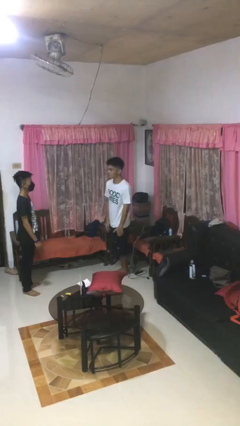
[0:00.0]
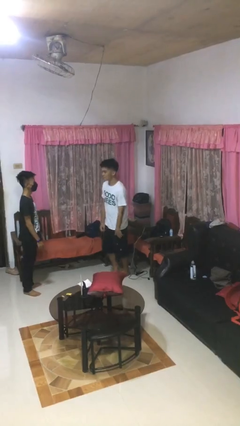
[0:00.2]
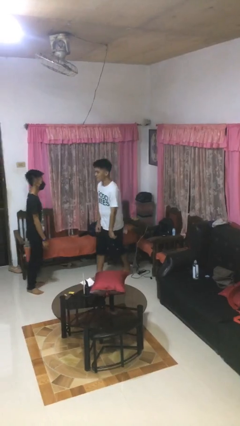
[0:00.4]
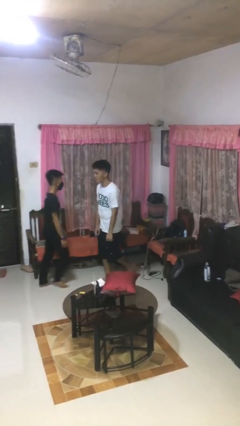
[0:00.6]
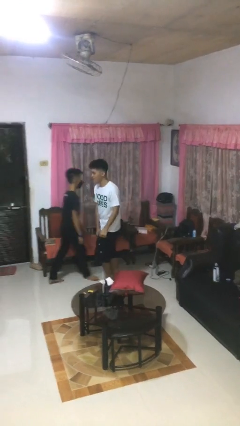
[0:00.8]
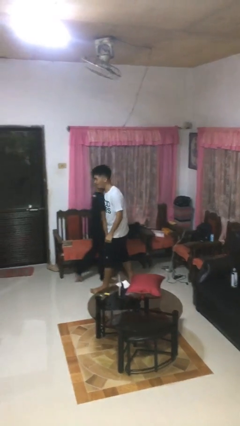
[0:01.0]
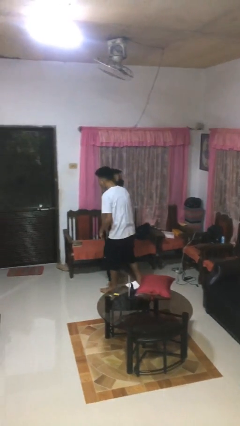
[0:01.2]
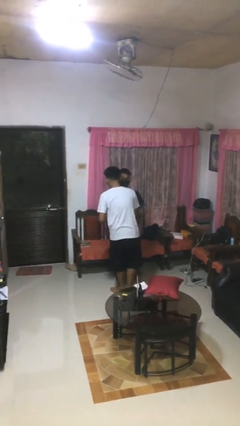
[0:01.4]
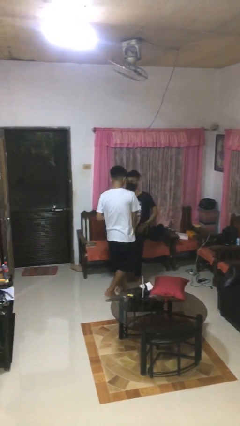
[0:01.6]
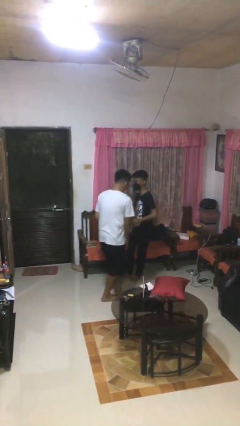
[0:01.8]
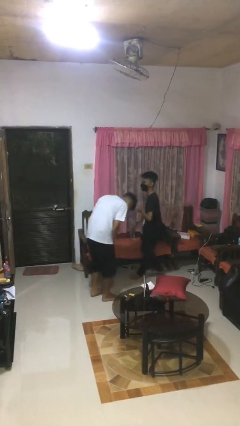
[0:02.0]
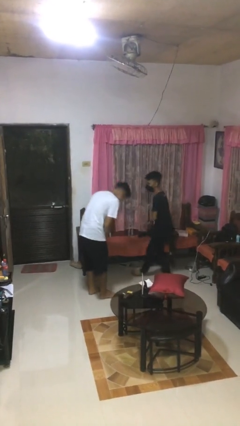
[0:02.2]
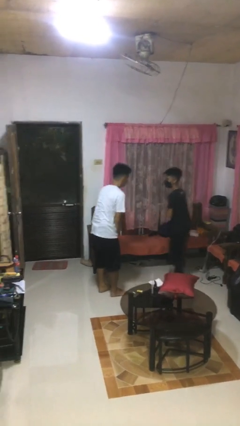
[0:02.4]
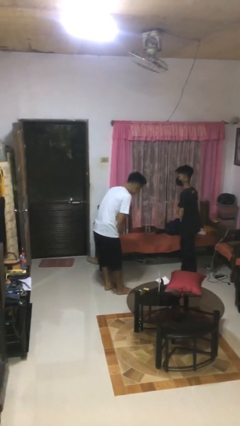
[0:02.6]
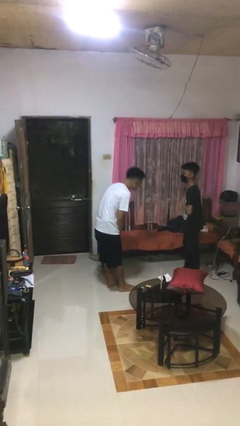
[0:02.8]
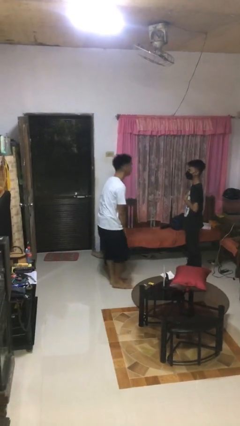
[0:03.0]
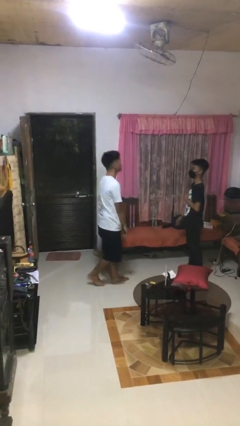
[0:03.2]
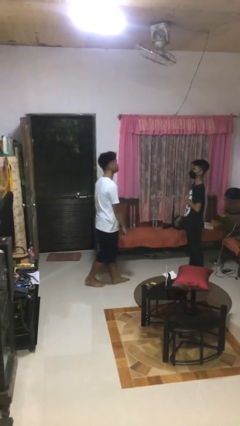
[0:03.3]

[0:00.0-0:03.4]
person bumps into person

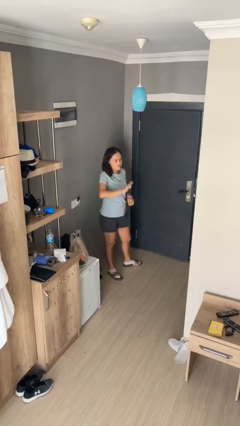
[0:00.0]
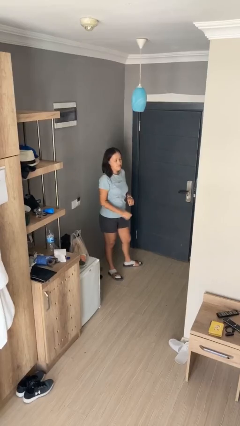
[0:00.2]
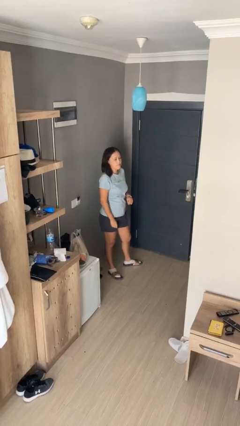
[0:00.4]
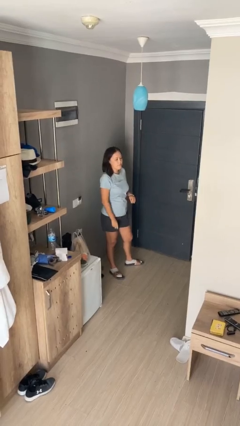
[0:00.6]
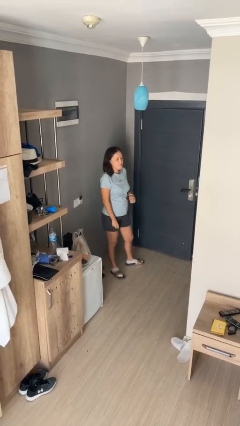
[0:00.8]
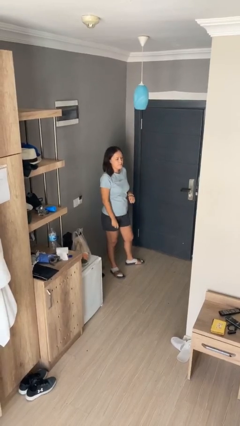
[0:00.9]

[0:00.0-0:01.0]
person gestures swipe down

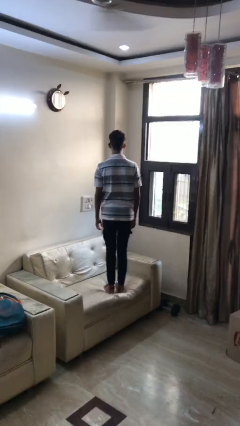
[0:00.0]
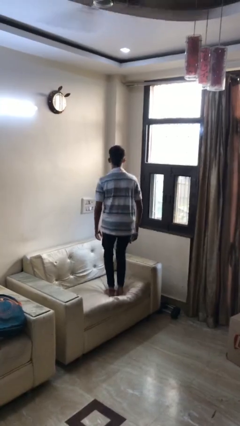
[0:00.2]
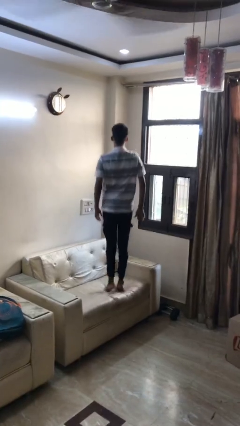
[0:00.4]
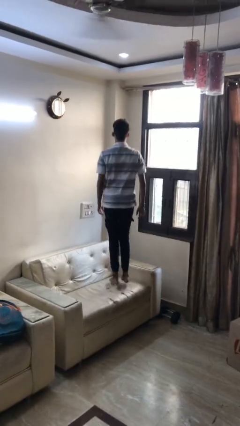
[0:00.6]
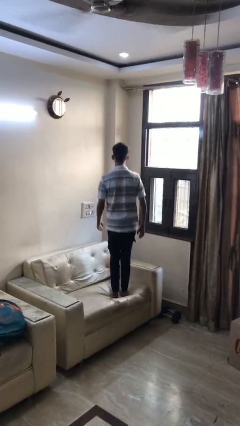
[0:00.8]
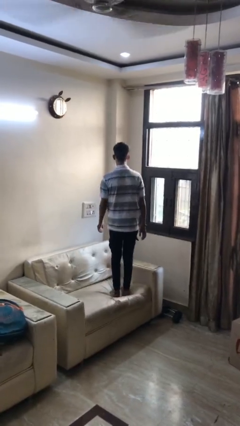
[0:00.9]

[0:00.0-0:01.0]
person jumps on couch

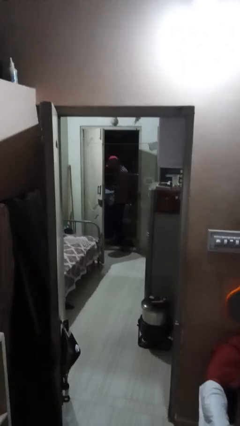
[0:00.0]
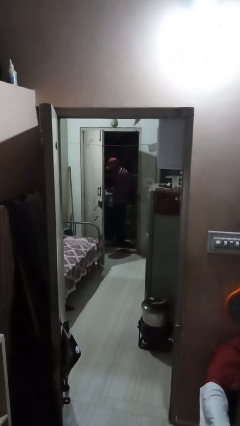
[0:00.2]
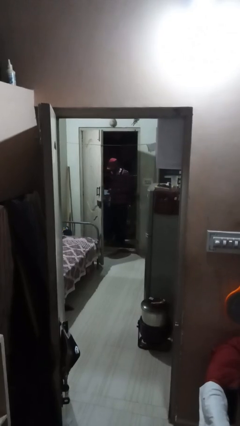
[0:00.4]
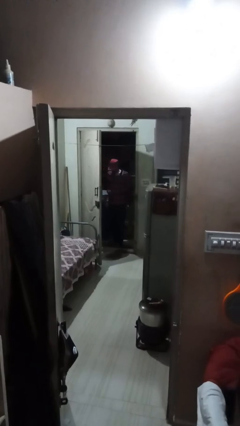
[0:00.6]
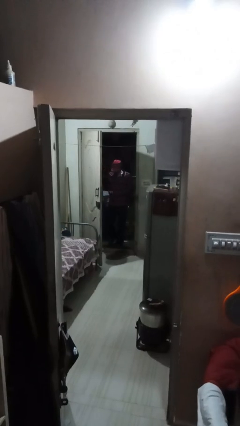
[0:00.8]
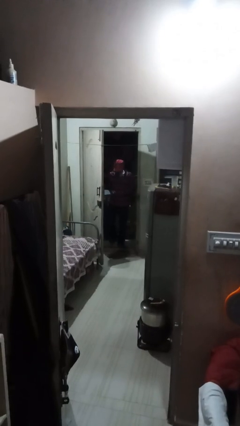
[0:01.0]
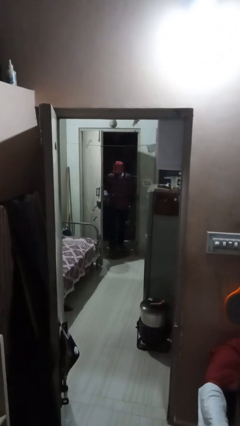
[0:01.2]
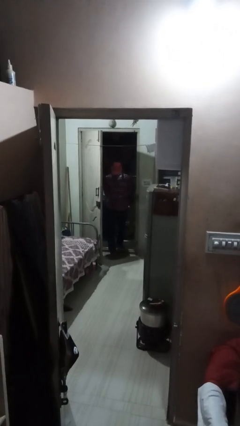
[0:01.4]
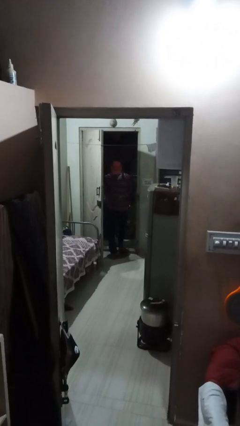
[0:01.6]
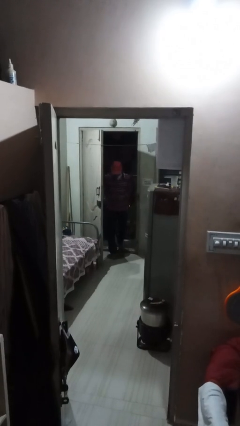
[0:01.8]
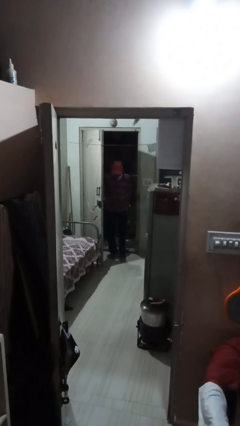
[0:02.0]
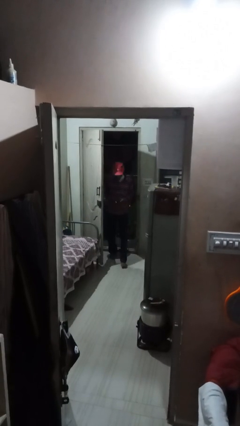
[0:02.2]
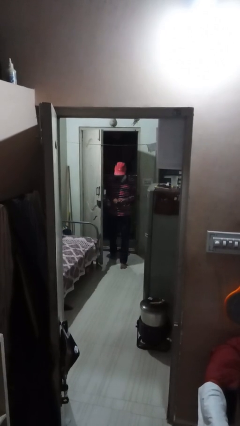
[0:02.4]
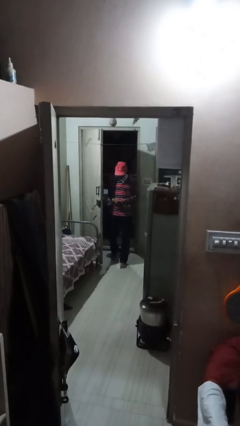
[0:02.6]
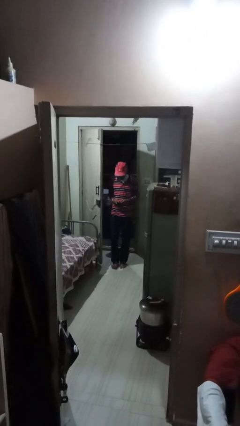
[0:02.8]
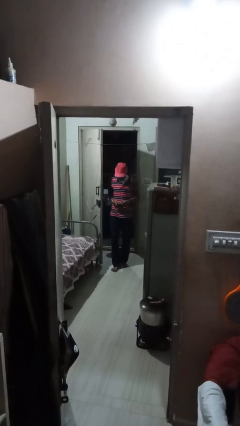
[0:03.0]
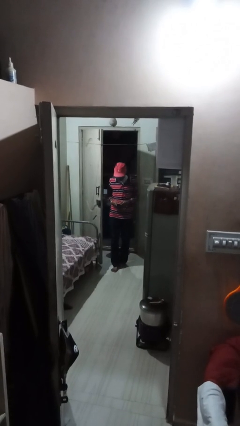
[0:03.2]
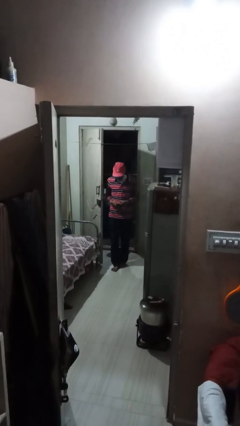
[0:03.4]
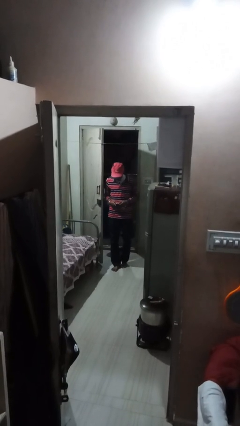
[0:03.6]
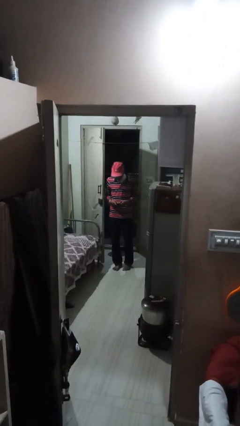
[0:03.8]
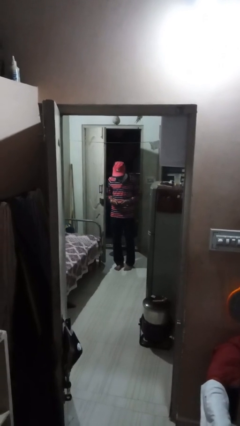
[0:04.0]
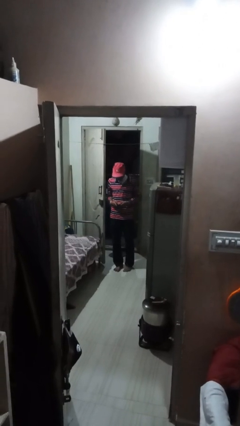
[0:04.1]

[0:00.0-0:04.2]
person enters scene through structure

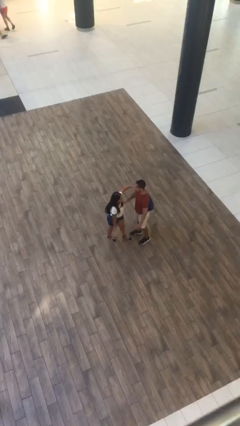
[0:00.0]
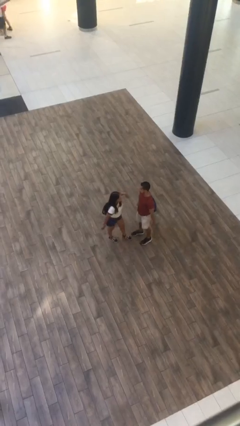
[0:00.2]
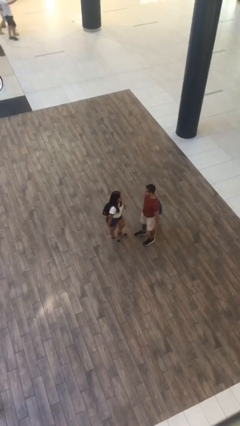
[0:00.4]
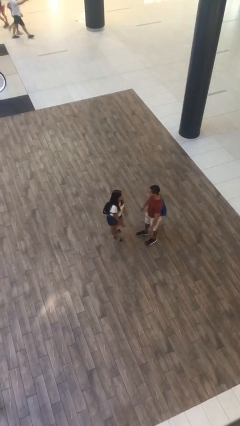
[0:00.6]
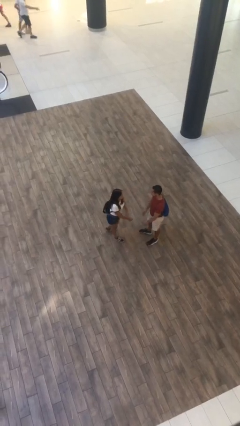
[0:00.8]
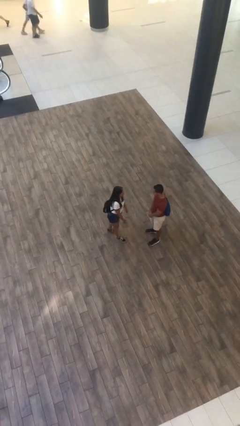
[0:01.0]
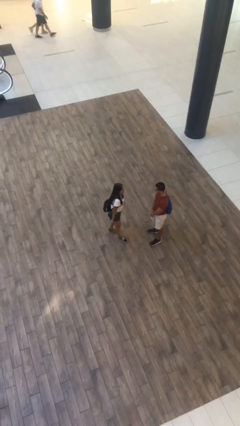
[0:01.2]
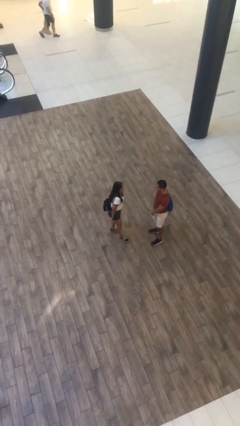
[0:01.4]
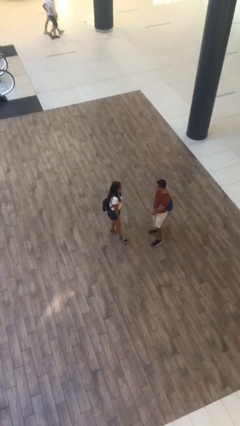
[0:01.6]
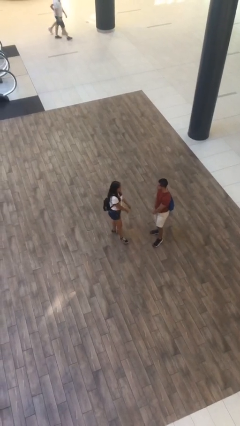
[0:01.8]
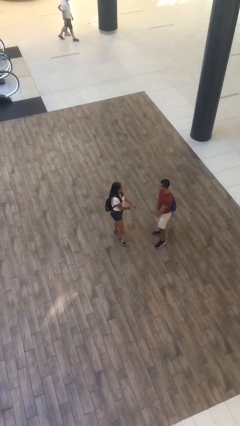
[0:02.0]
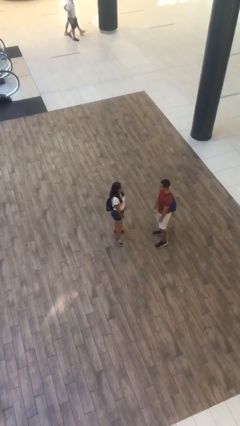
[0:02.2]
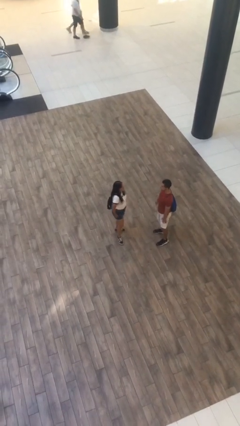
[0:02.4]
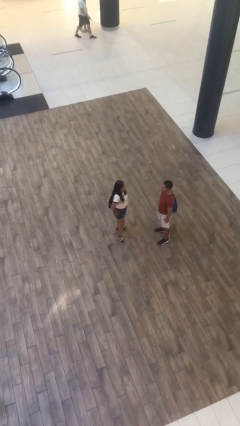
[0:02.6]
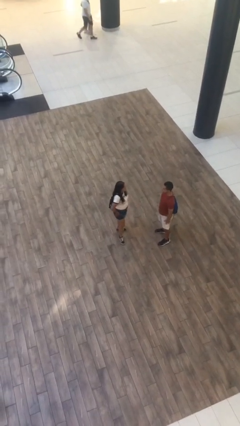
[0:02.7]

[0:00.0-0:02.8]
person talks to person

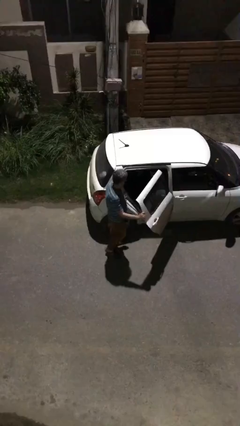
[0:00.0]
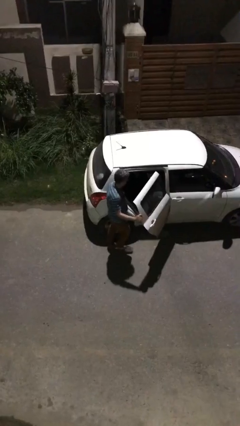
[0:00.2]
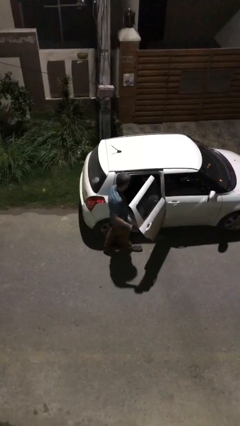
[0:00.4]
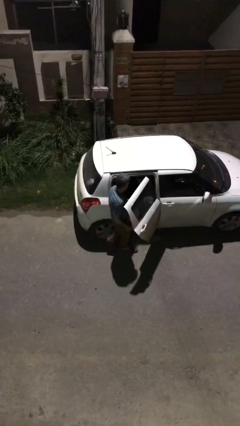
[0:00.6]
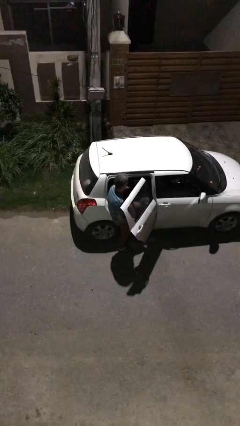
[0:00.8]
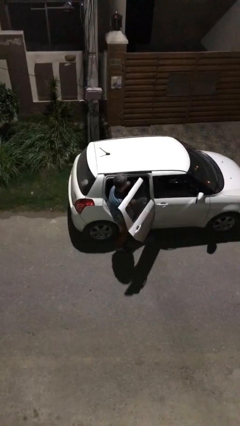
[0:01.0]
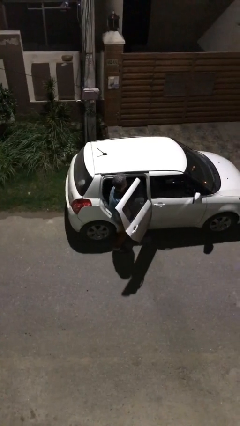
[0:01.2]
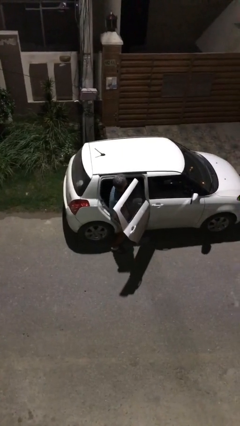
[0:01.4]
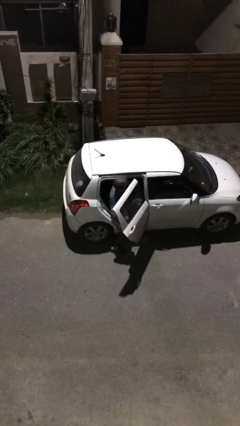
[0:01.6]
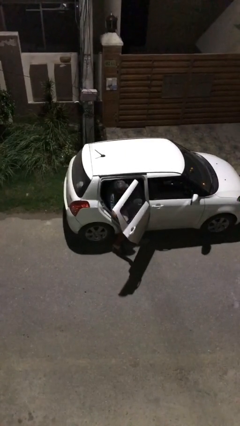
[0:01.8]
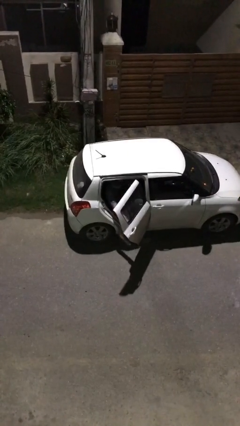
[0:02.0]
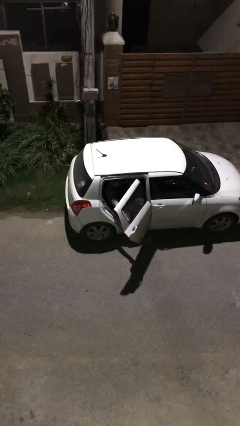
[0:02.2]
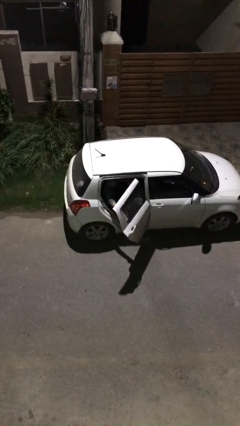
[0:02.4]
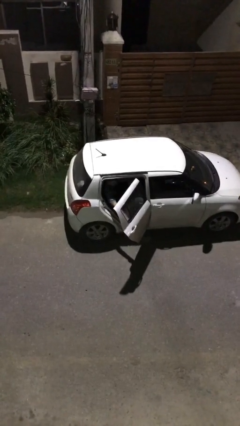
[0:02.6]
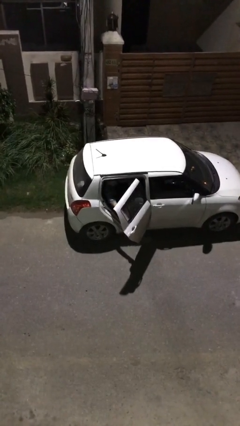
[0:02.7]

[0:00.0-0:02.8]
person enters car

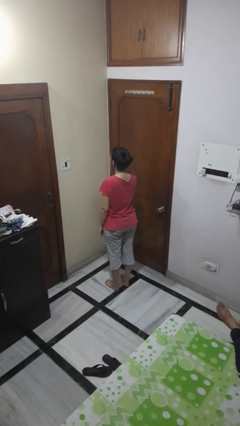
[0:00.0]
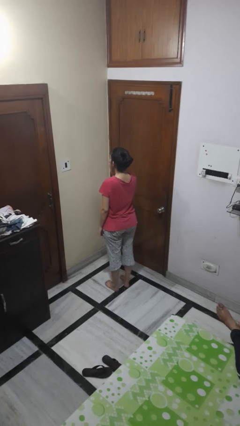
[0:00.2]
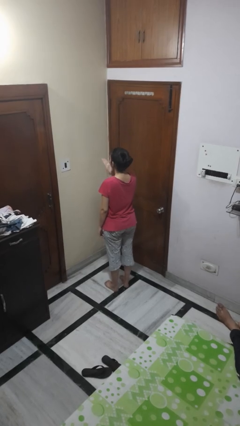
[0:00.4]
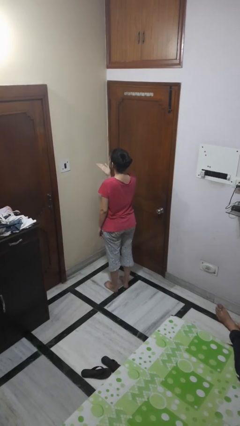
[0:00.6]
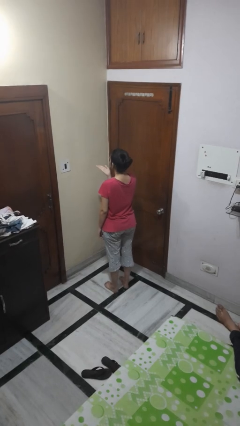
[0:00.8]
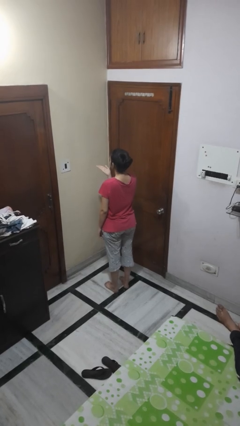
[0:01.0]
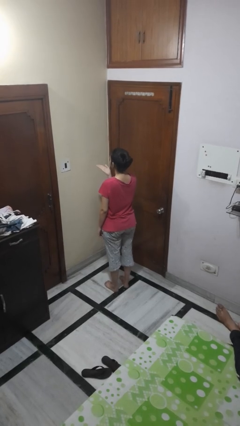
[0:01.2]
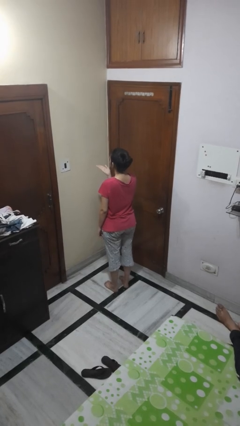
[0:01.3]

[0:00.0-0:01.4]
person gestures blow kiss

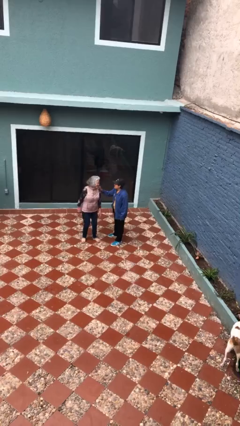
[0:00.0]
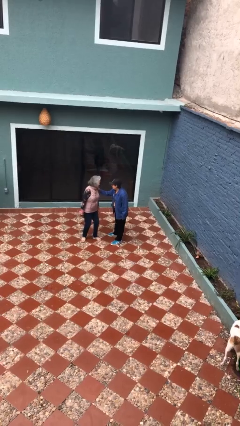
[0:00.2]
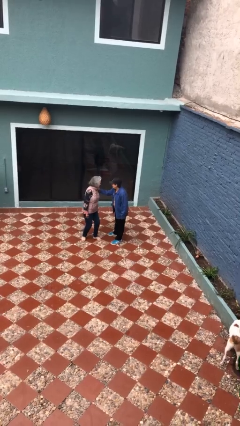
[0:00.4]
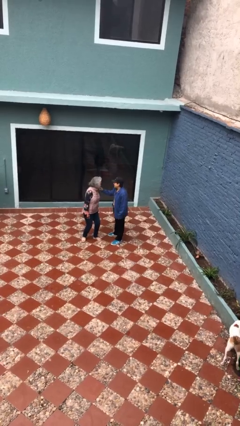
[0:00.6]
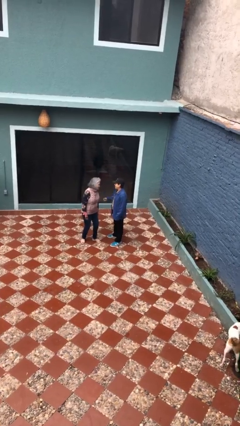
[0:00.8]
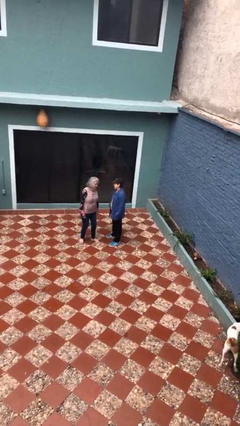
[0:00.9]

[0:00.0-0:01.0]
person spins person around
